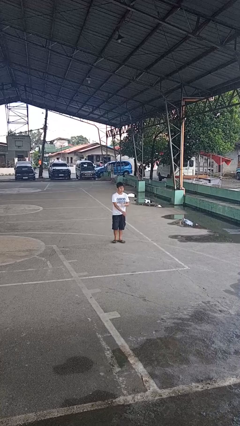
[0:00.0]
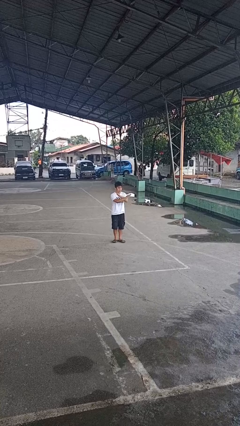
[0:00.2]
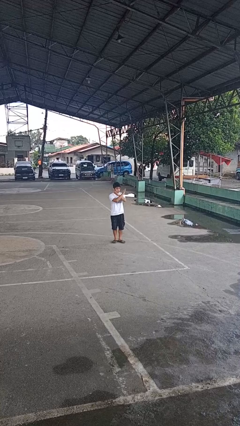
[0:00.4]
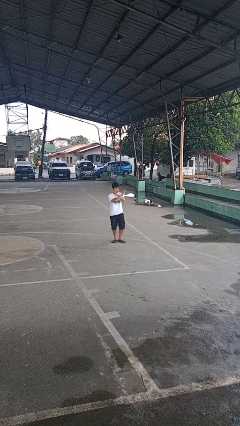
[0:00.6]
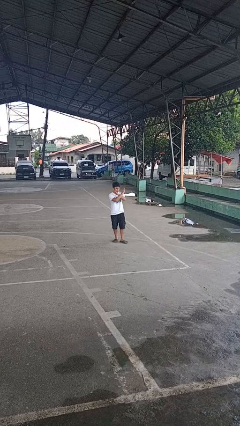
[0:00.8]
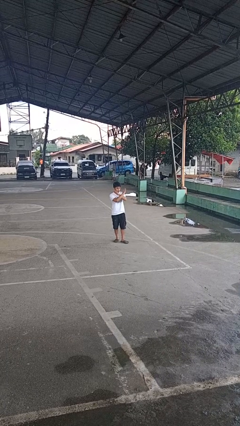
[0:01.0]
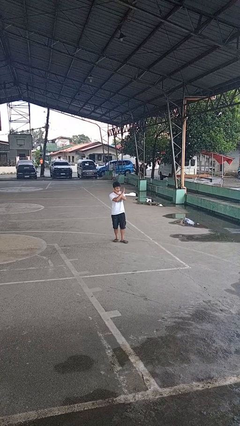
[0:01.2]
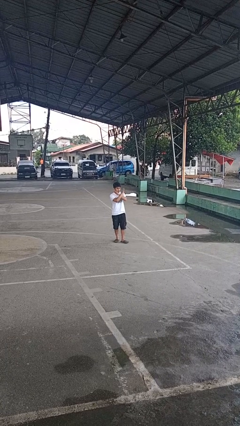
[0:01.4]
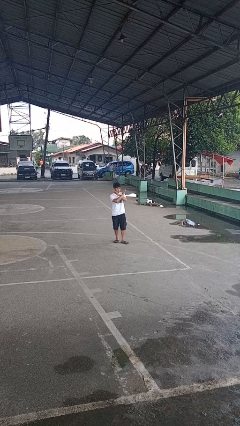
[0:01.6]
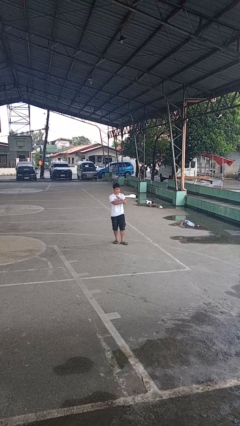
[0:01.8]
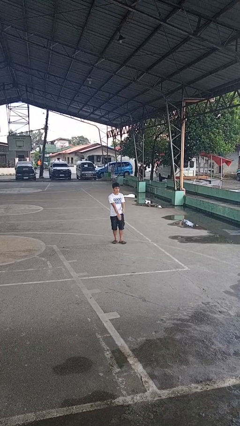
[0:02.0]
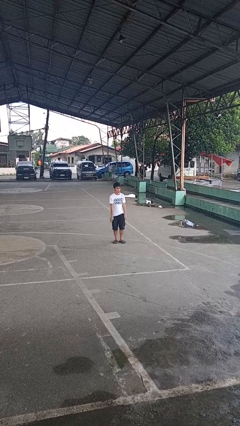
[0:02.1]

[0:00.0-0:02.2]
person gestures arms x

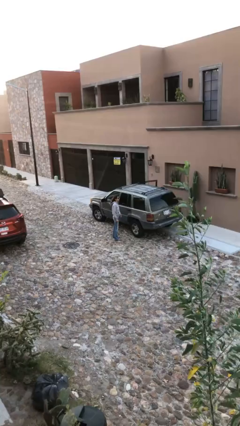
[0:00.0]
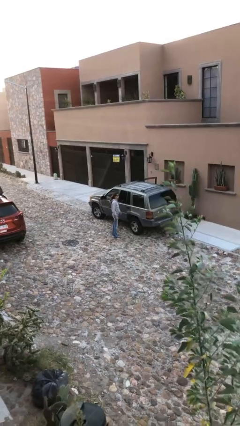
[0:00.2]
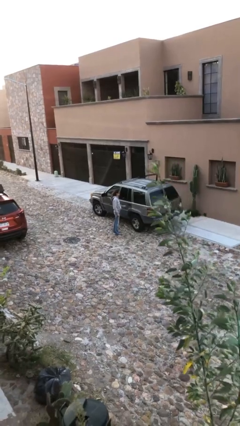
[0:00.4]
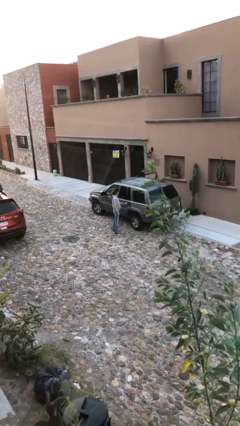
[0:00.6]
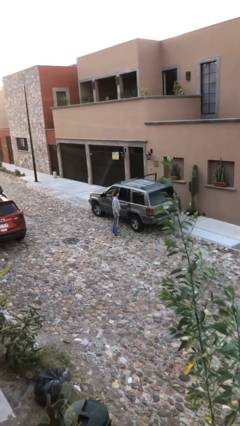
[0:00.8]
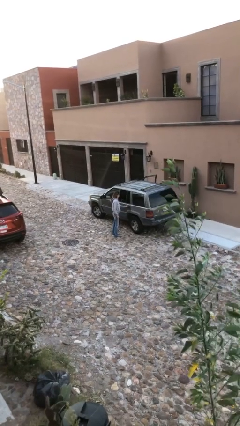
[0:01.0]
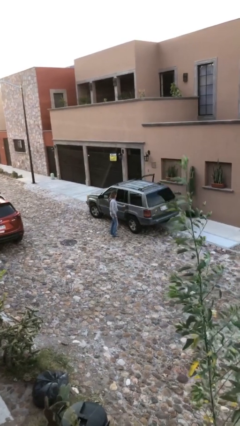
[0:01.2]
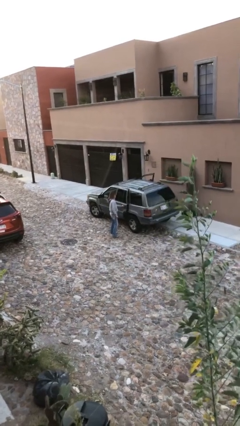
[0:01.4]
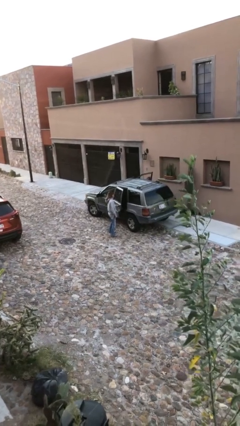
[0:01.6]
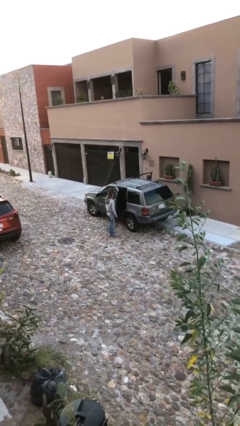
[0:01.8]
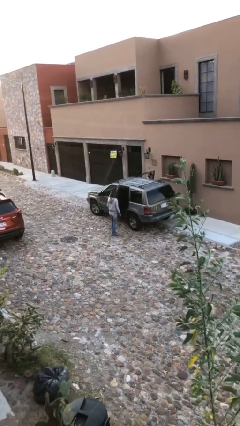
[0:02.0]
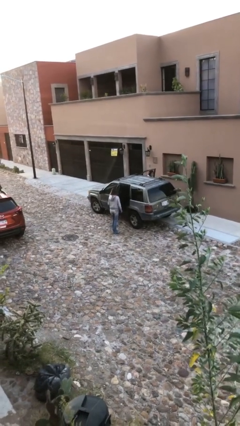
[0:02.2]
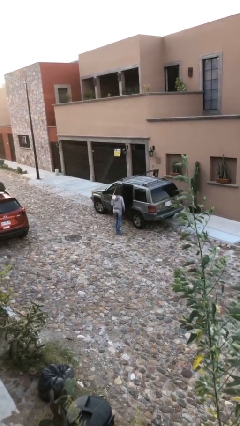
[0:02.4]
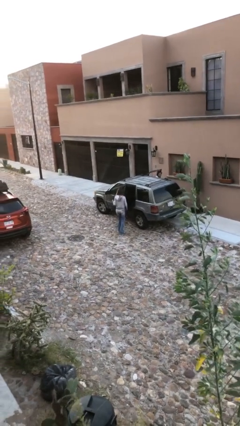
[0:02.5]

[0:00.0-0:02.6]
person opens car door

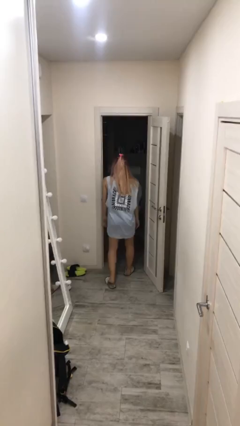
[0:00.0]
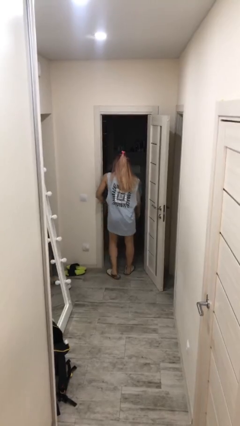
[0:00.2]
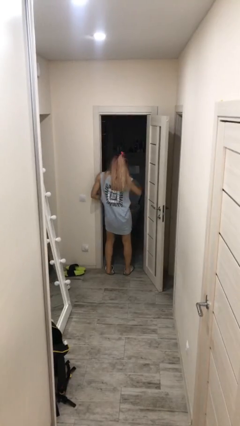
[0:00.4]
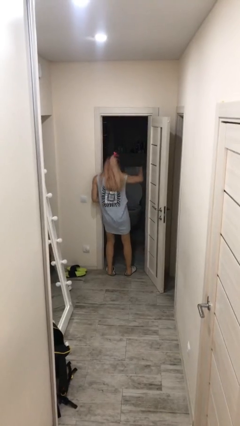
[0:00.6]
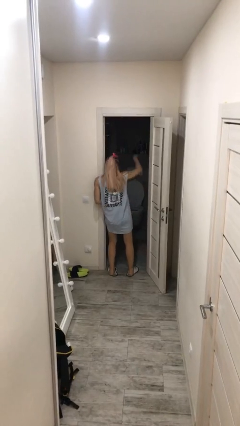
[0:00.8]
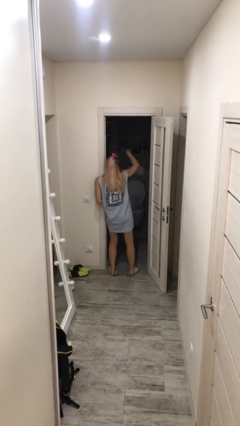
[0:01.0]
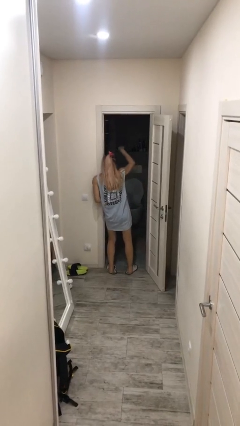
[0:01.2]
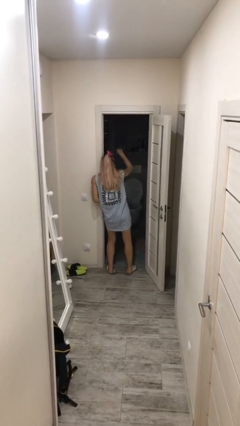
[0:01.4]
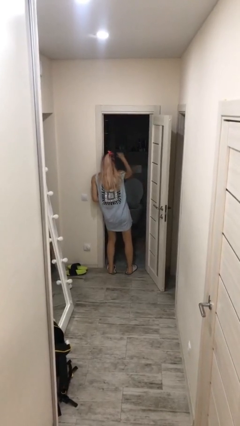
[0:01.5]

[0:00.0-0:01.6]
person bumps into wall

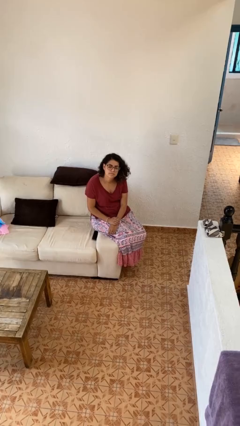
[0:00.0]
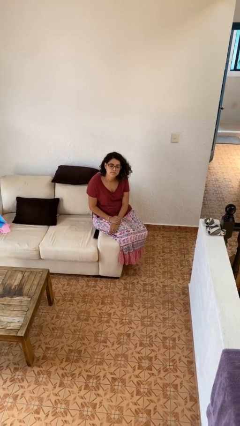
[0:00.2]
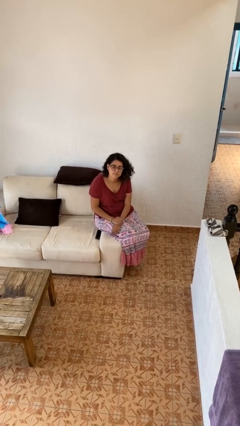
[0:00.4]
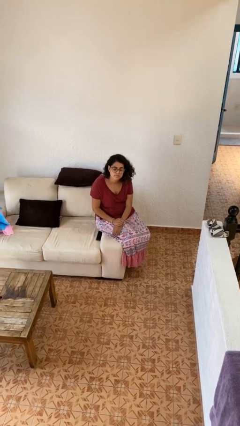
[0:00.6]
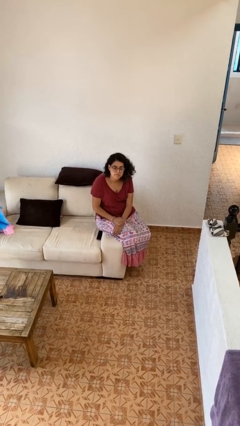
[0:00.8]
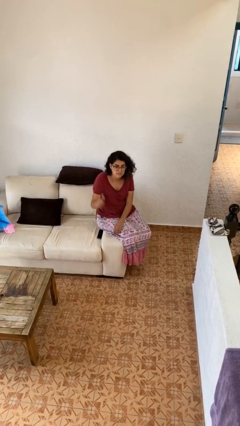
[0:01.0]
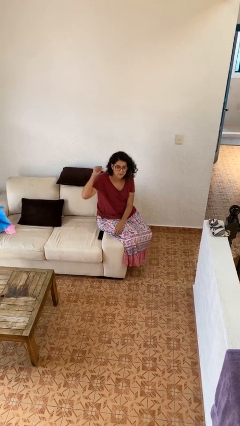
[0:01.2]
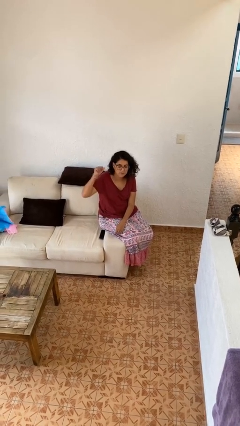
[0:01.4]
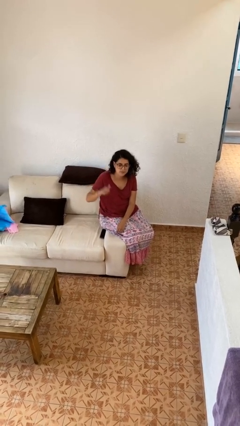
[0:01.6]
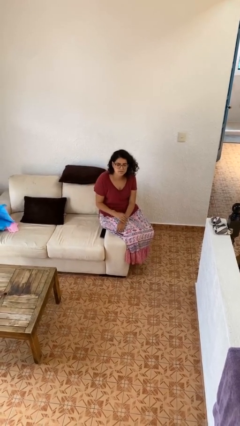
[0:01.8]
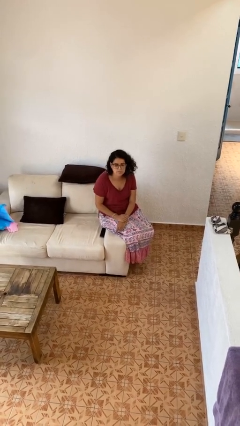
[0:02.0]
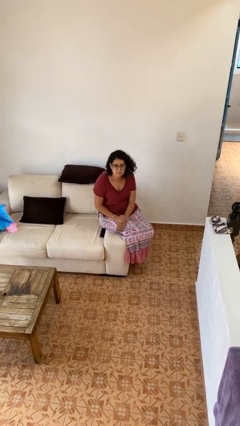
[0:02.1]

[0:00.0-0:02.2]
person gestures behind me

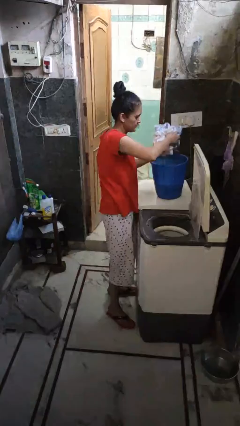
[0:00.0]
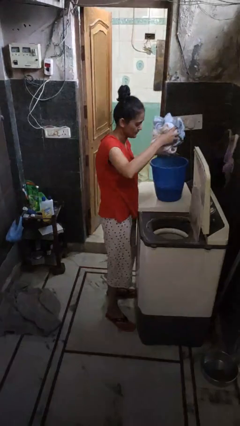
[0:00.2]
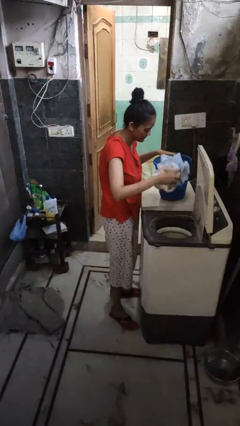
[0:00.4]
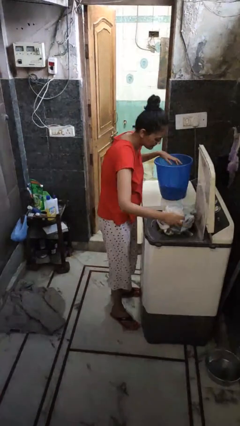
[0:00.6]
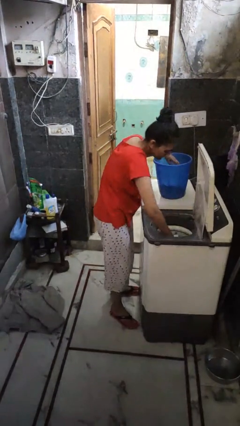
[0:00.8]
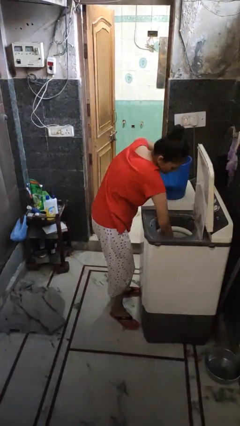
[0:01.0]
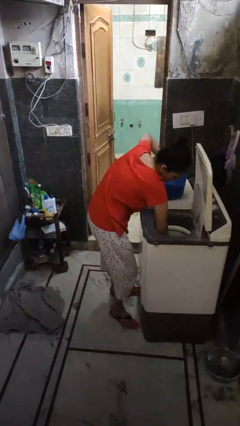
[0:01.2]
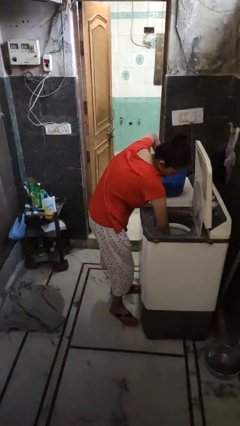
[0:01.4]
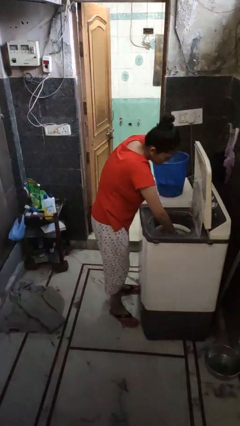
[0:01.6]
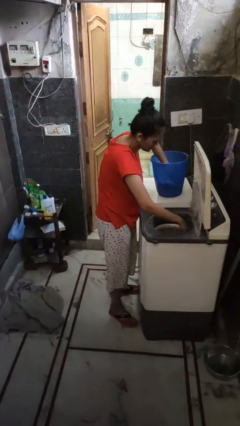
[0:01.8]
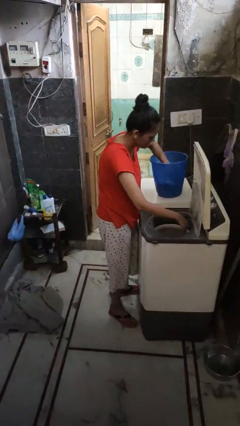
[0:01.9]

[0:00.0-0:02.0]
person loads clotheswasher

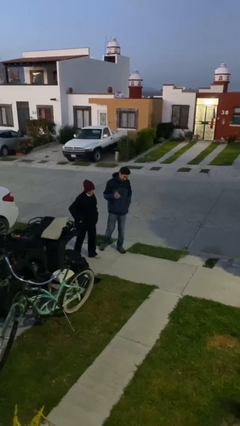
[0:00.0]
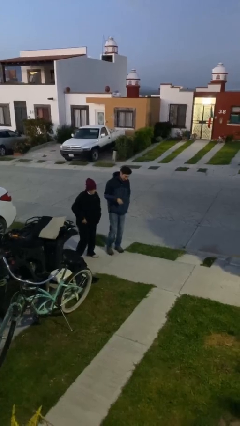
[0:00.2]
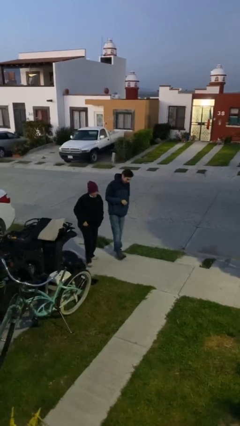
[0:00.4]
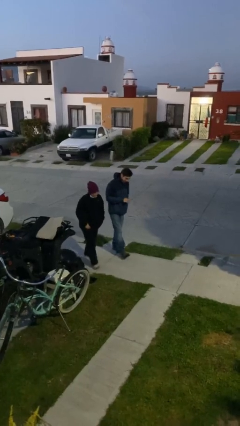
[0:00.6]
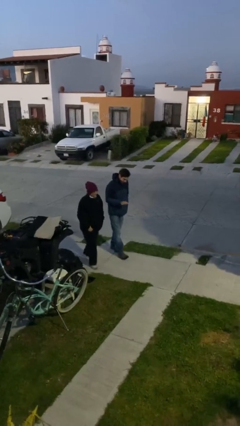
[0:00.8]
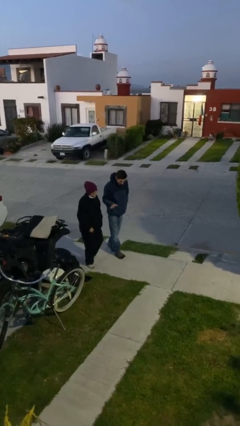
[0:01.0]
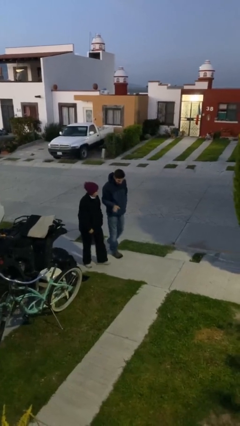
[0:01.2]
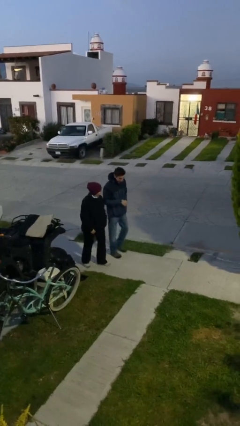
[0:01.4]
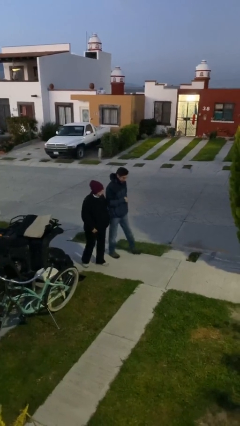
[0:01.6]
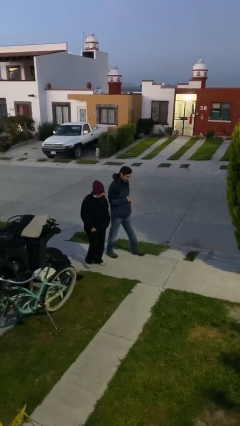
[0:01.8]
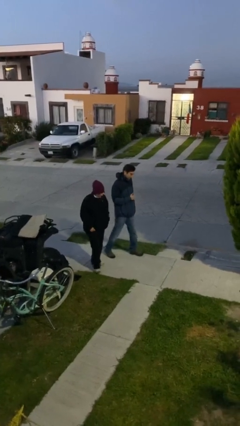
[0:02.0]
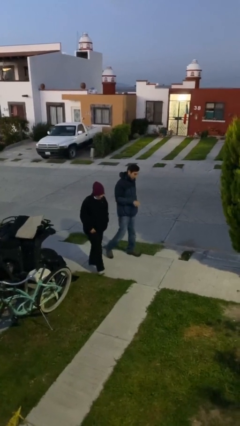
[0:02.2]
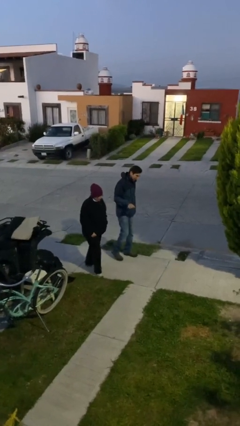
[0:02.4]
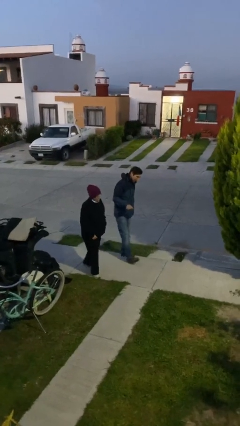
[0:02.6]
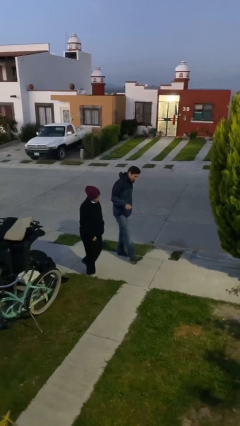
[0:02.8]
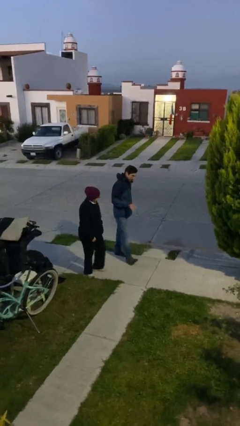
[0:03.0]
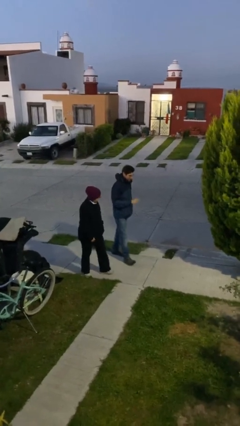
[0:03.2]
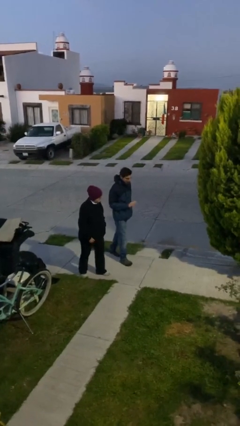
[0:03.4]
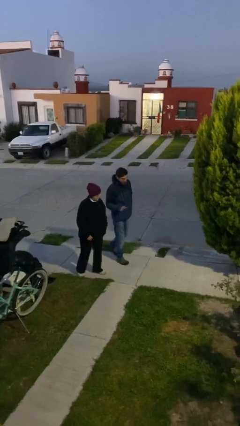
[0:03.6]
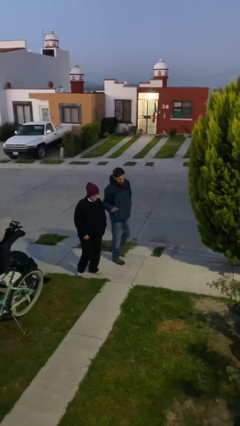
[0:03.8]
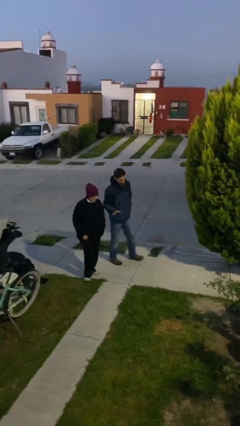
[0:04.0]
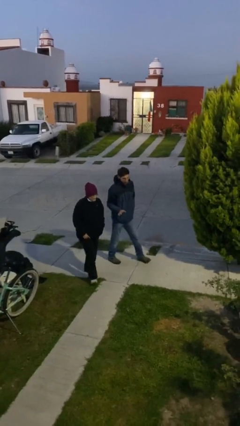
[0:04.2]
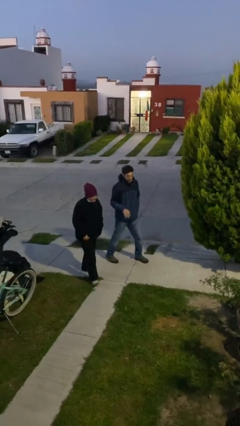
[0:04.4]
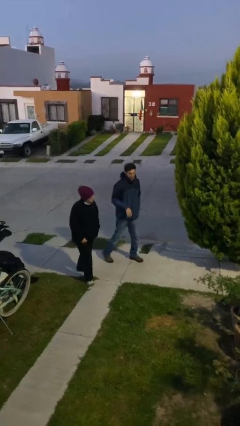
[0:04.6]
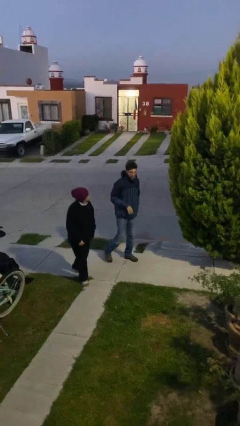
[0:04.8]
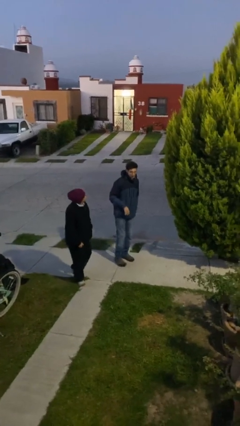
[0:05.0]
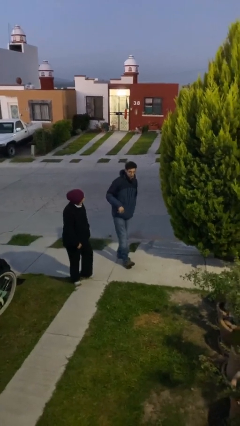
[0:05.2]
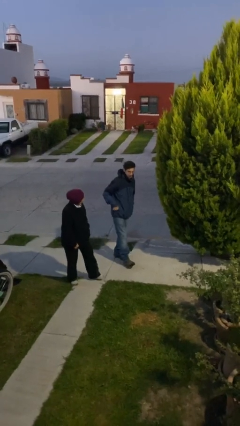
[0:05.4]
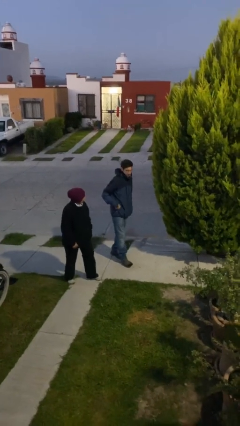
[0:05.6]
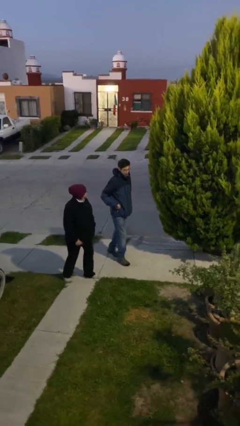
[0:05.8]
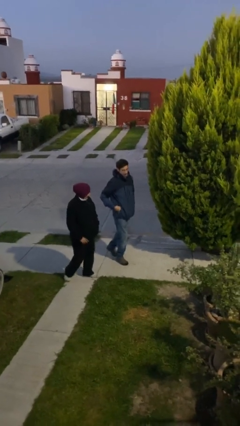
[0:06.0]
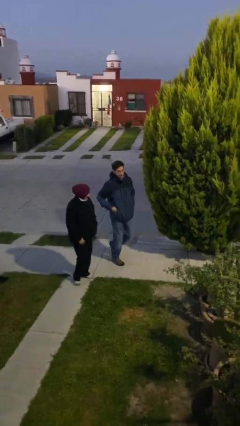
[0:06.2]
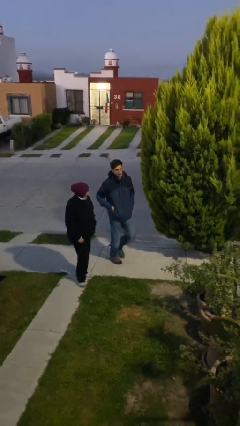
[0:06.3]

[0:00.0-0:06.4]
person talks to person

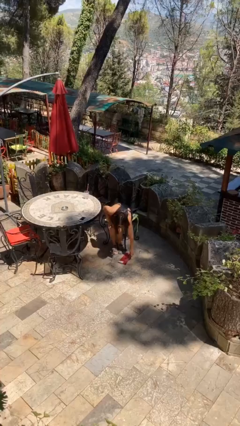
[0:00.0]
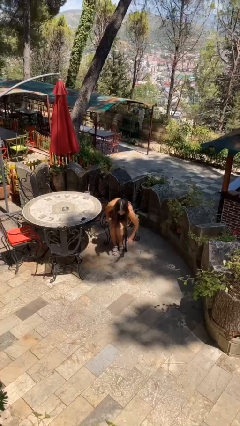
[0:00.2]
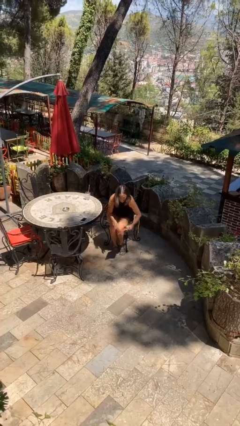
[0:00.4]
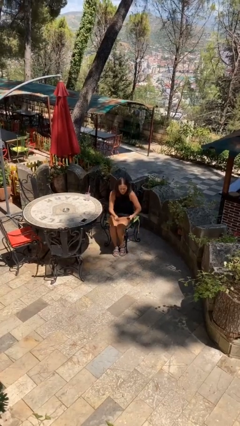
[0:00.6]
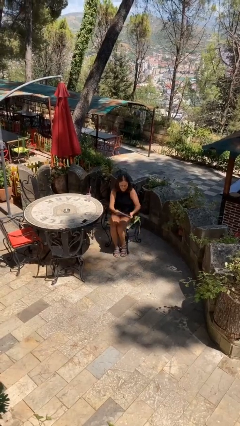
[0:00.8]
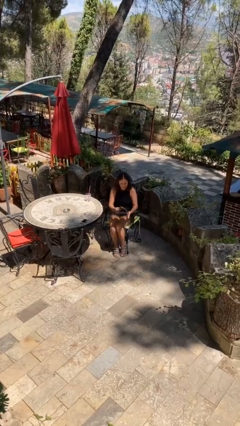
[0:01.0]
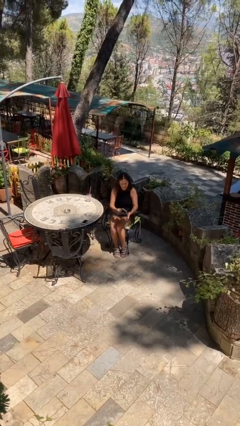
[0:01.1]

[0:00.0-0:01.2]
person picks up object from floor
